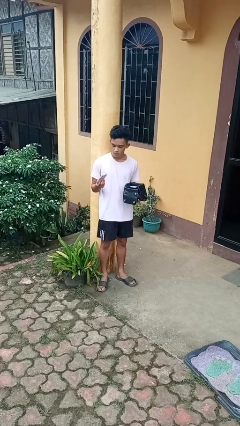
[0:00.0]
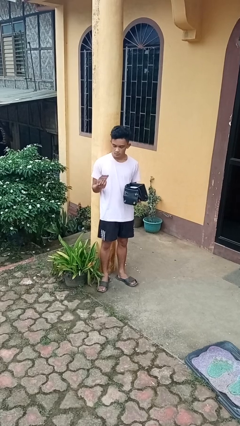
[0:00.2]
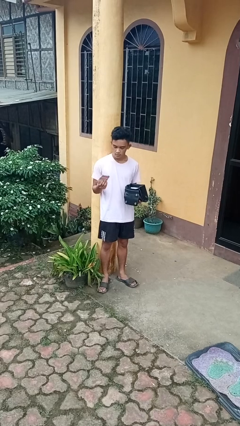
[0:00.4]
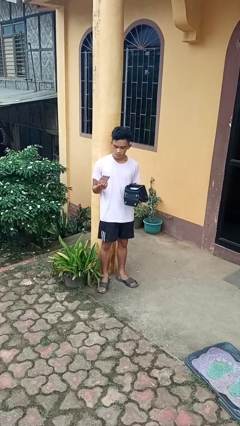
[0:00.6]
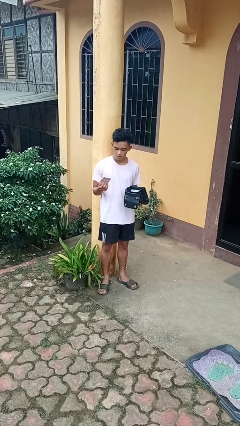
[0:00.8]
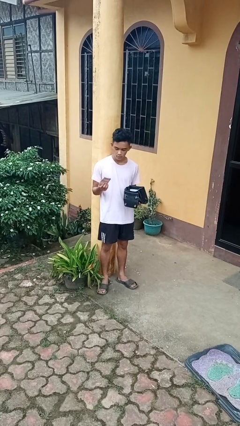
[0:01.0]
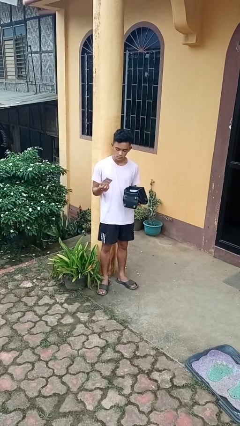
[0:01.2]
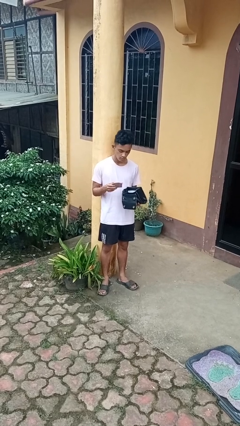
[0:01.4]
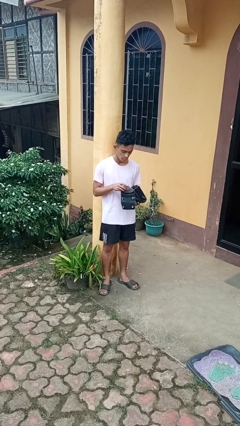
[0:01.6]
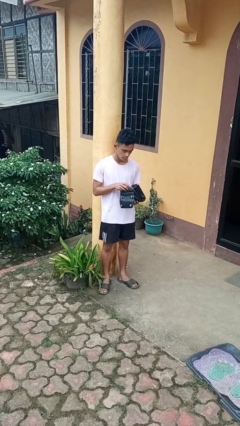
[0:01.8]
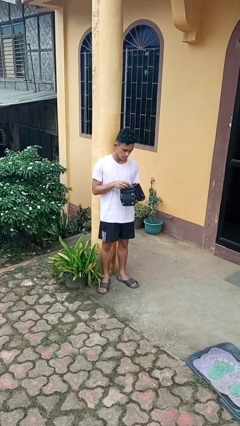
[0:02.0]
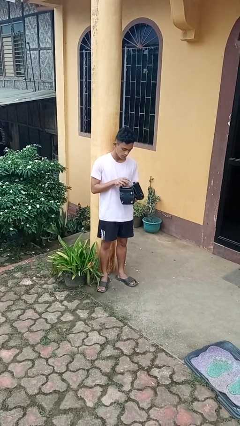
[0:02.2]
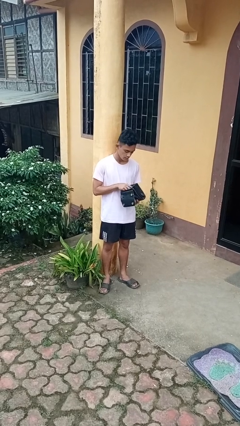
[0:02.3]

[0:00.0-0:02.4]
person takes object from purse

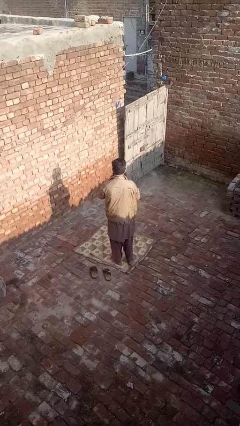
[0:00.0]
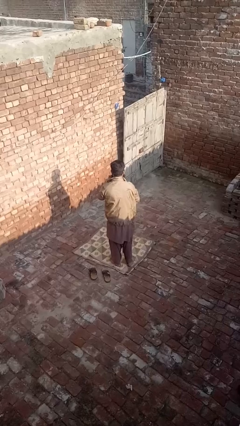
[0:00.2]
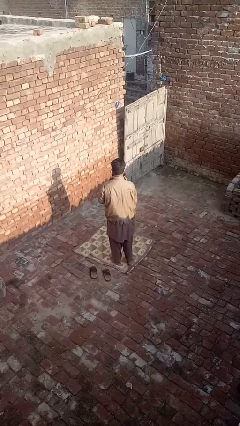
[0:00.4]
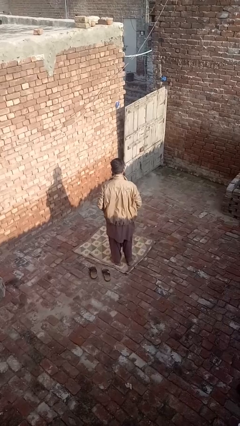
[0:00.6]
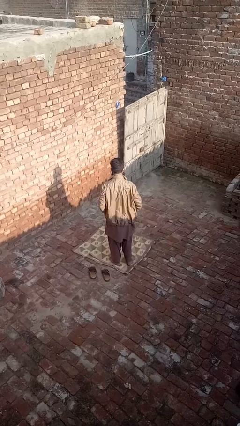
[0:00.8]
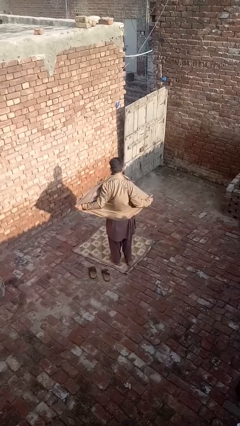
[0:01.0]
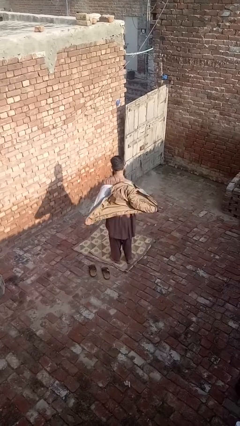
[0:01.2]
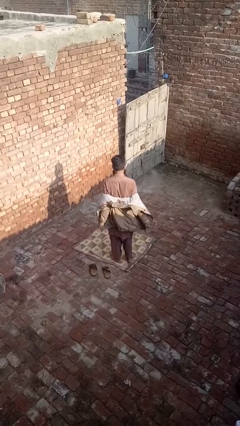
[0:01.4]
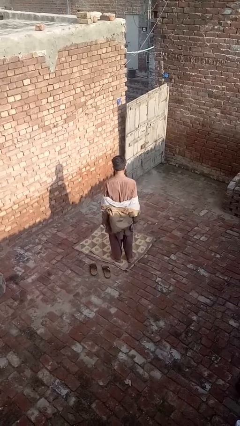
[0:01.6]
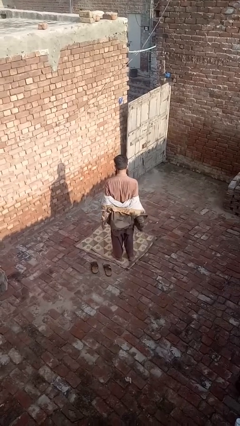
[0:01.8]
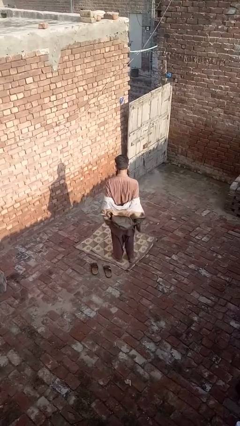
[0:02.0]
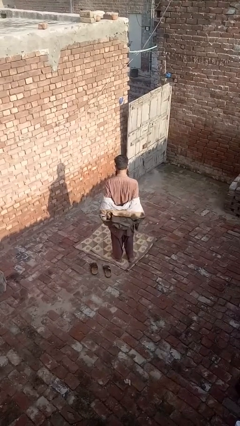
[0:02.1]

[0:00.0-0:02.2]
person takes off jacket

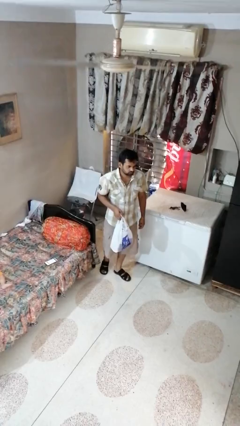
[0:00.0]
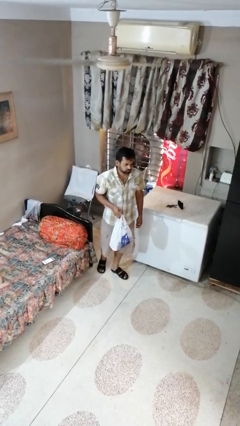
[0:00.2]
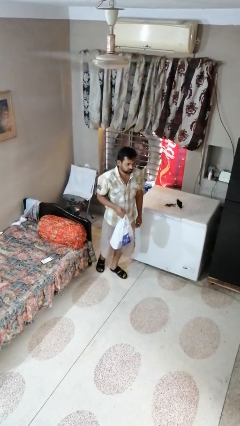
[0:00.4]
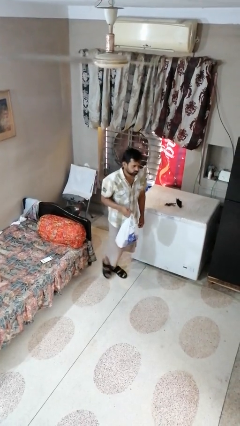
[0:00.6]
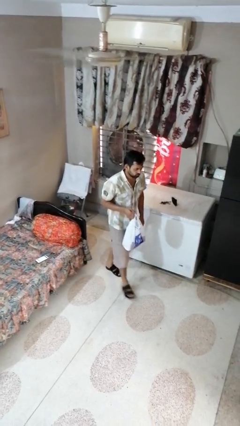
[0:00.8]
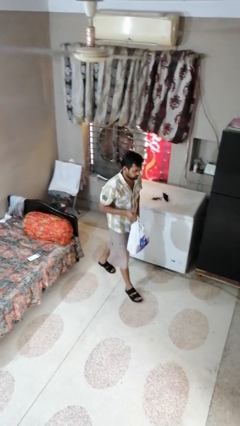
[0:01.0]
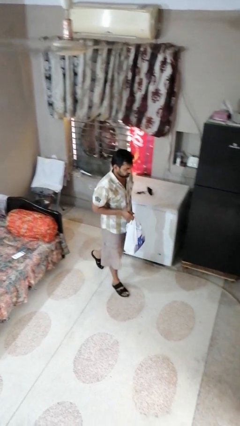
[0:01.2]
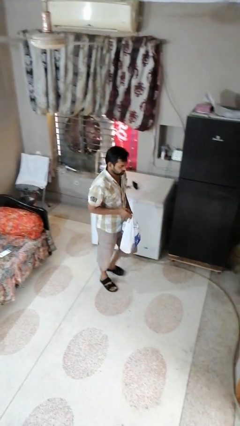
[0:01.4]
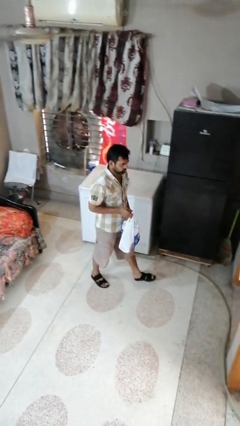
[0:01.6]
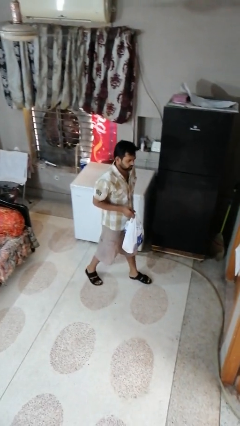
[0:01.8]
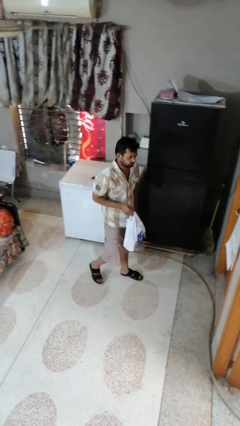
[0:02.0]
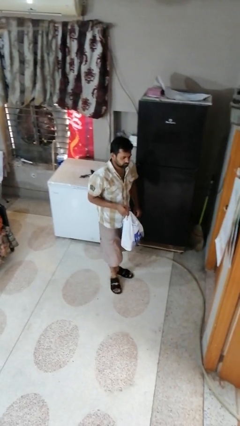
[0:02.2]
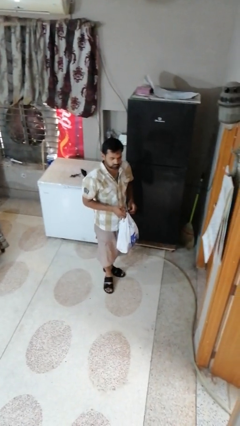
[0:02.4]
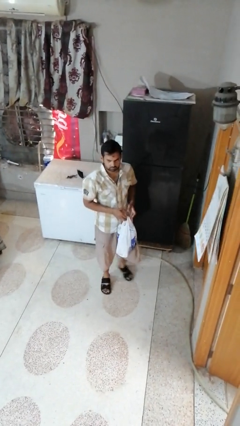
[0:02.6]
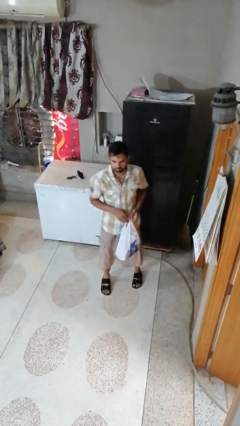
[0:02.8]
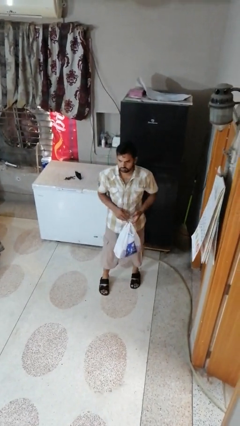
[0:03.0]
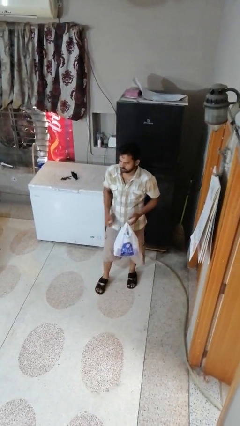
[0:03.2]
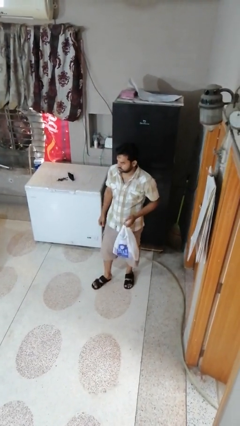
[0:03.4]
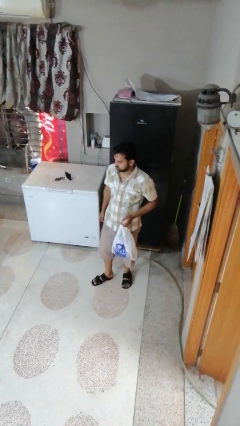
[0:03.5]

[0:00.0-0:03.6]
person carries groceries

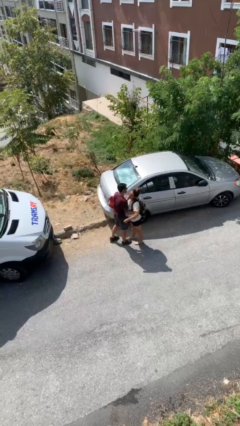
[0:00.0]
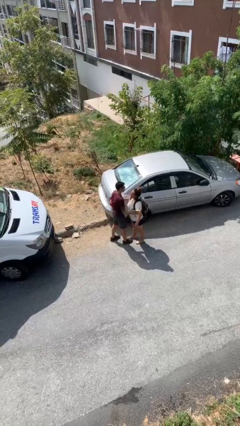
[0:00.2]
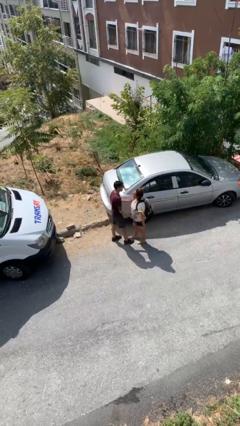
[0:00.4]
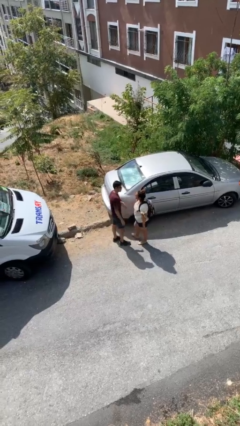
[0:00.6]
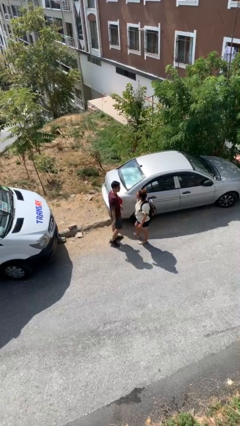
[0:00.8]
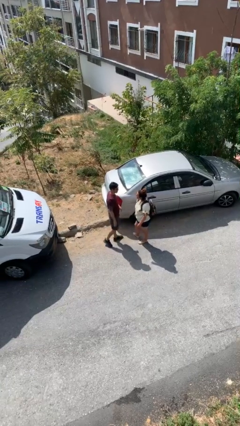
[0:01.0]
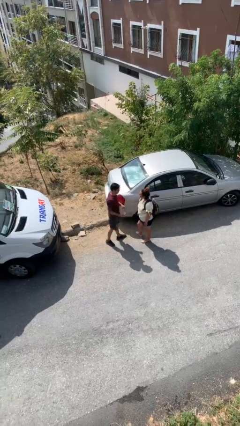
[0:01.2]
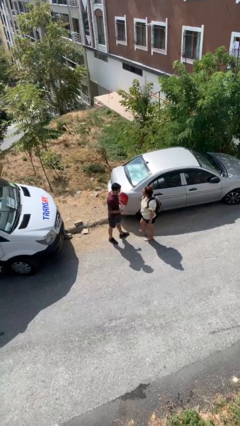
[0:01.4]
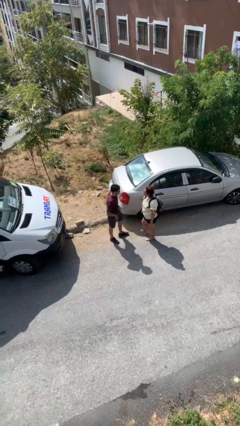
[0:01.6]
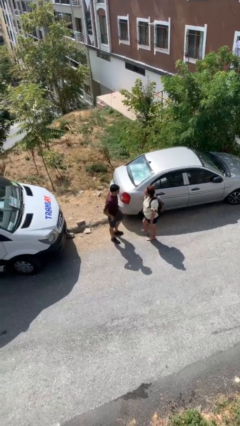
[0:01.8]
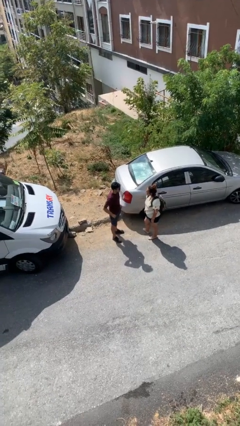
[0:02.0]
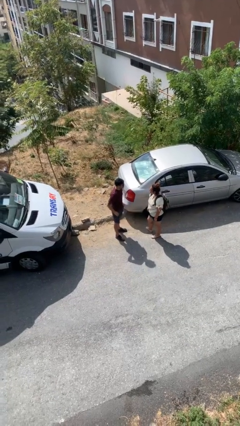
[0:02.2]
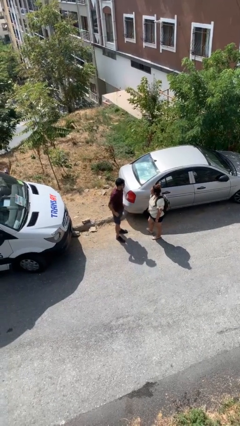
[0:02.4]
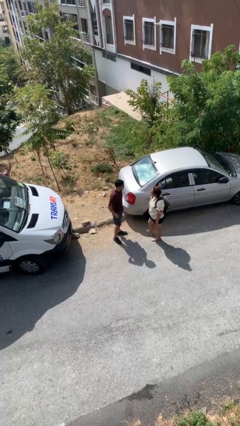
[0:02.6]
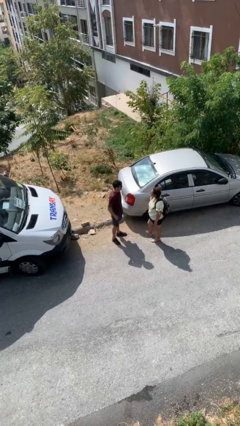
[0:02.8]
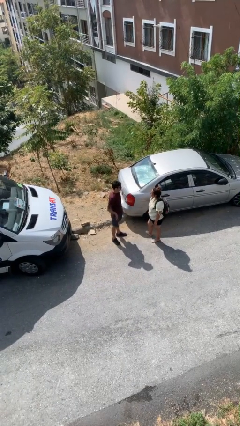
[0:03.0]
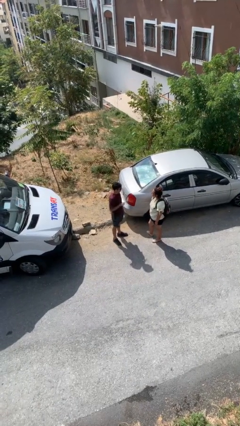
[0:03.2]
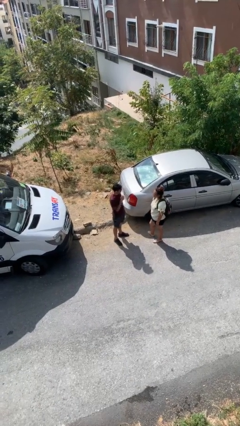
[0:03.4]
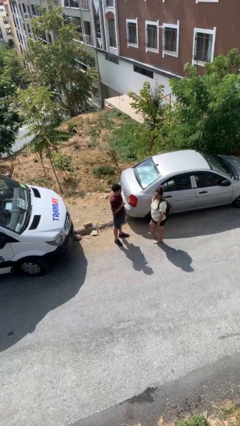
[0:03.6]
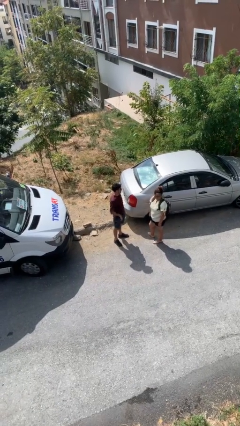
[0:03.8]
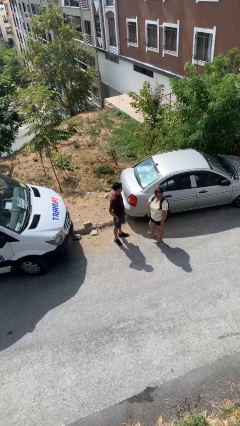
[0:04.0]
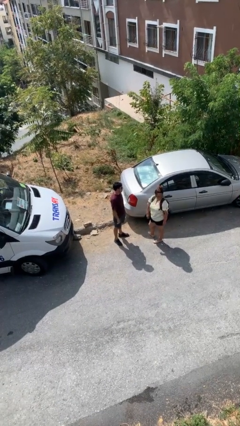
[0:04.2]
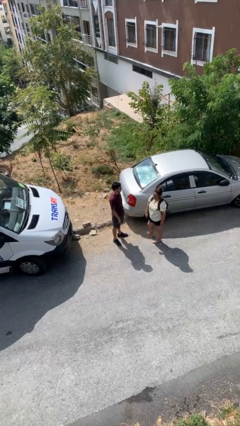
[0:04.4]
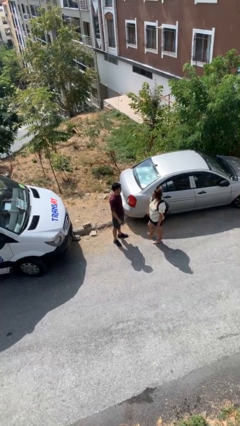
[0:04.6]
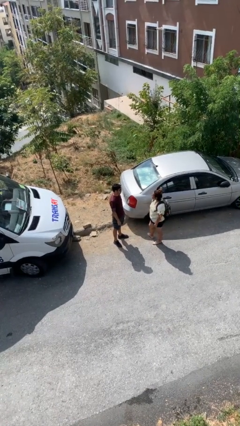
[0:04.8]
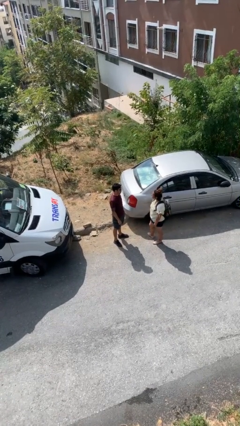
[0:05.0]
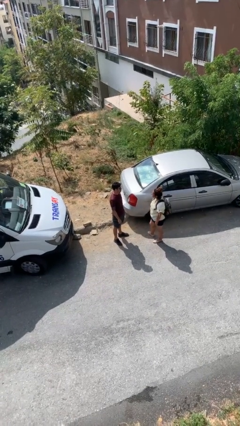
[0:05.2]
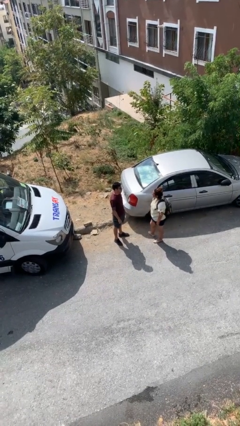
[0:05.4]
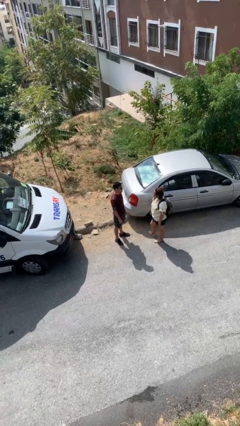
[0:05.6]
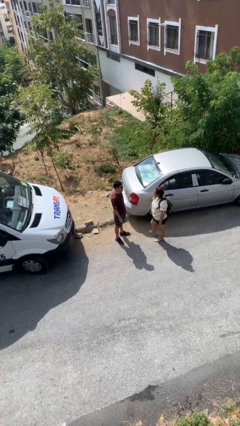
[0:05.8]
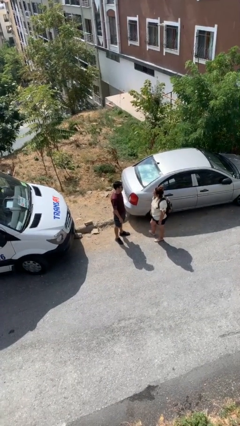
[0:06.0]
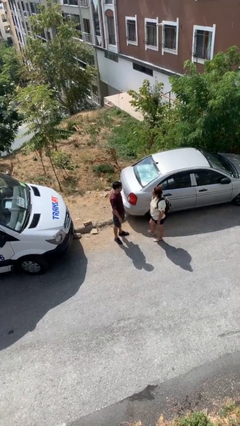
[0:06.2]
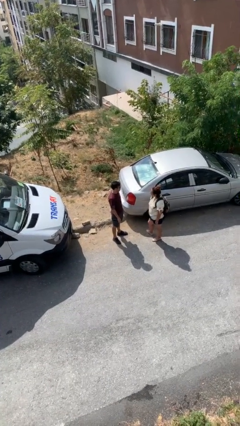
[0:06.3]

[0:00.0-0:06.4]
person talks to person

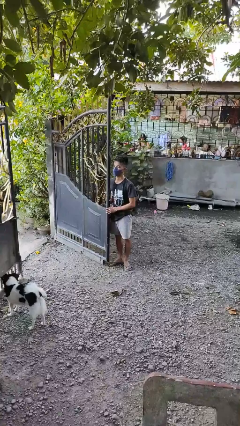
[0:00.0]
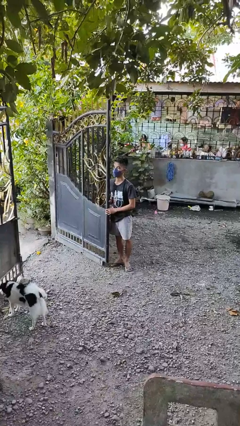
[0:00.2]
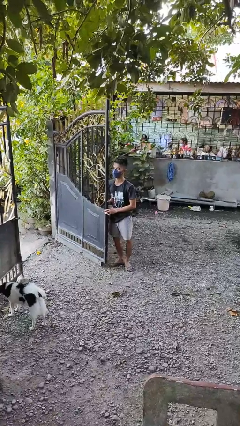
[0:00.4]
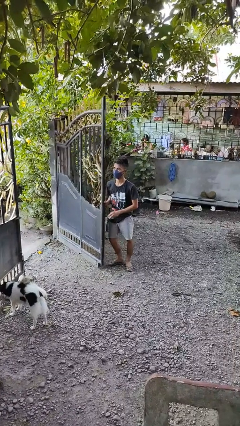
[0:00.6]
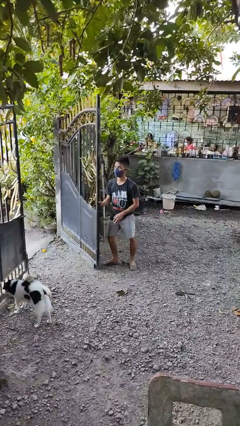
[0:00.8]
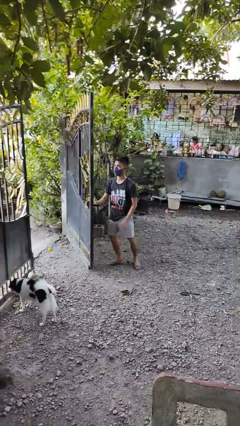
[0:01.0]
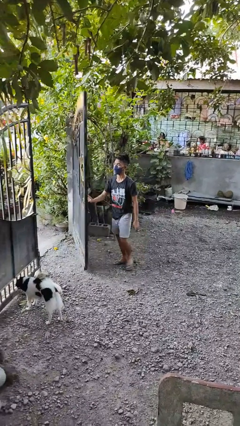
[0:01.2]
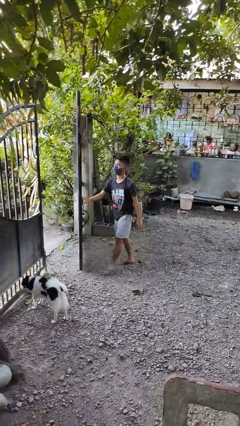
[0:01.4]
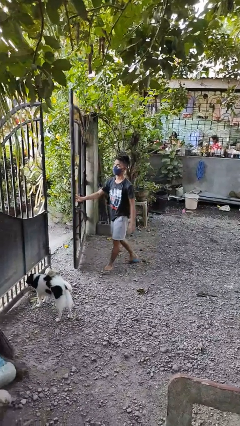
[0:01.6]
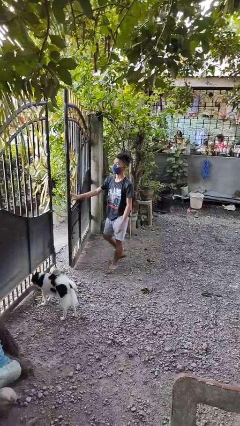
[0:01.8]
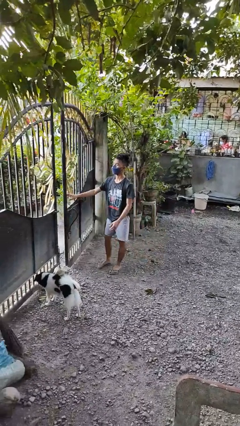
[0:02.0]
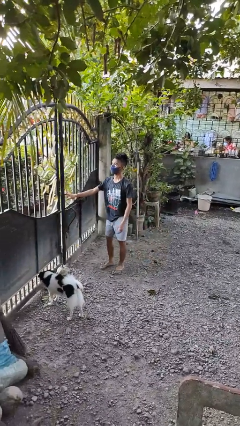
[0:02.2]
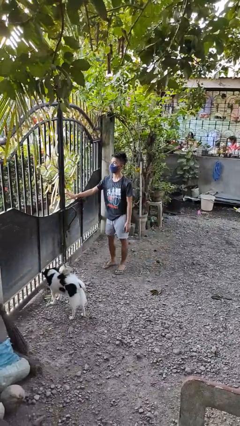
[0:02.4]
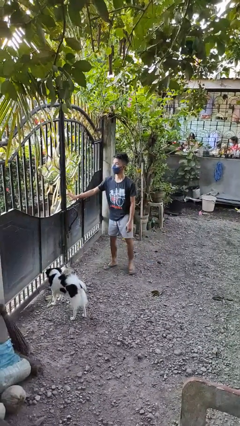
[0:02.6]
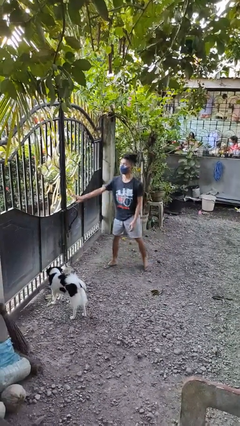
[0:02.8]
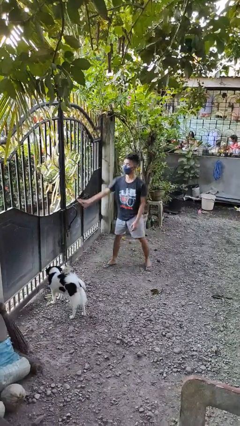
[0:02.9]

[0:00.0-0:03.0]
person closes gate

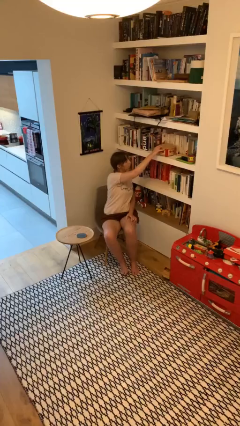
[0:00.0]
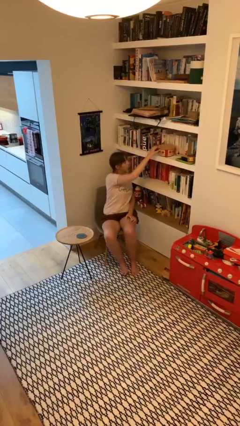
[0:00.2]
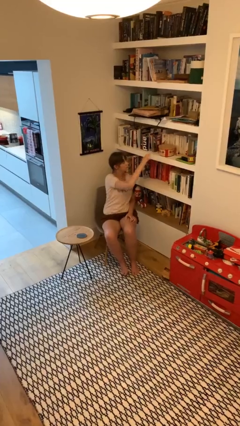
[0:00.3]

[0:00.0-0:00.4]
person puts down object on shelf
